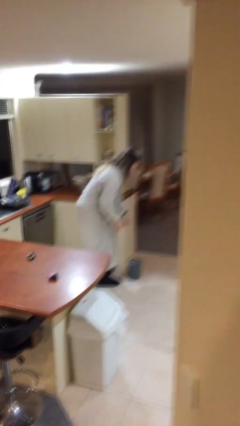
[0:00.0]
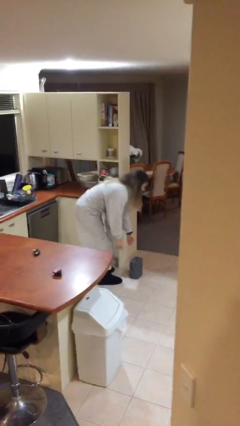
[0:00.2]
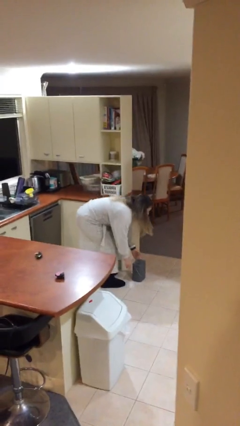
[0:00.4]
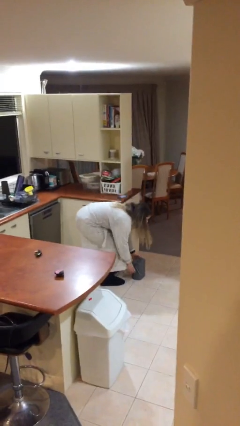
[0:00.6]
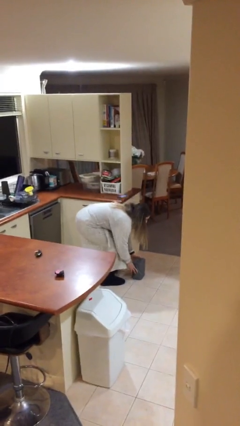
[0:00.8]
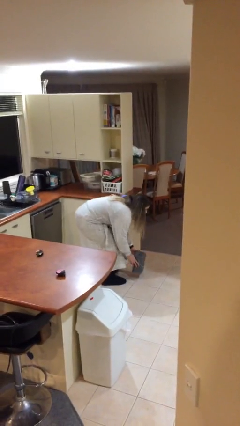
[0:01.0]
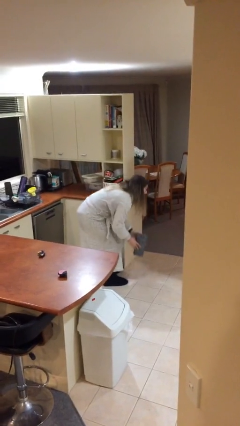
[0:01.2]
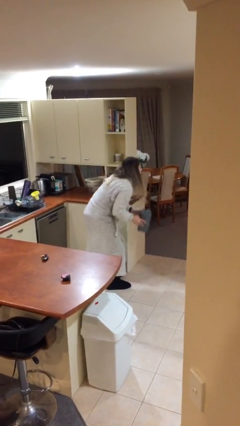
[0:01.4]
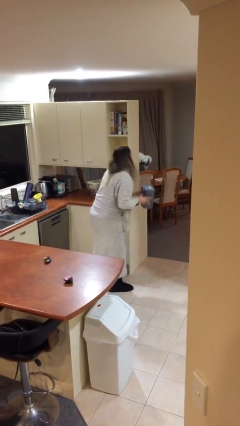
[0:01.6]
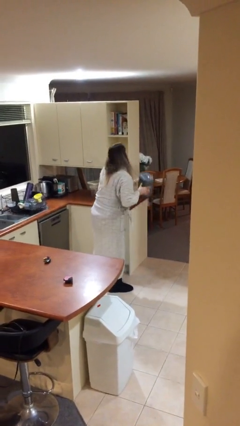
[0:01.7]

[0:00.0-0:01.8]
person picks up object from floor

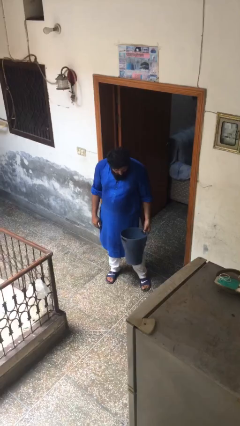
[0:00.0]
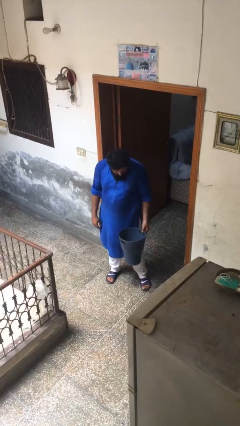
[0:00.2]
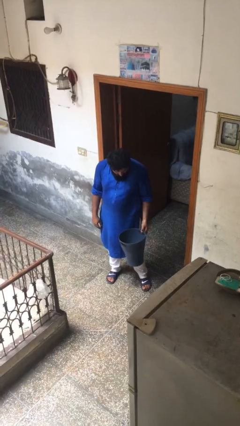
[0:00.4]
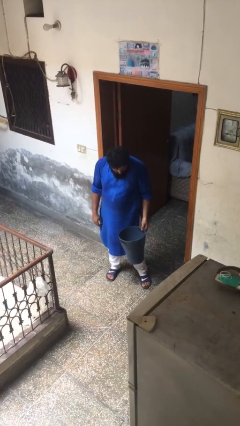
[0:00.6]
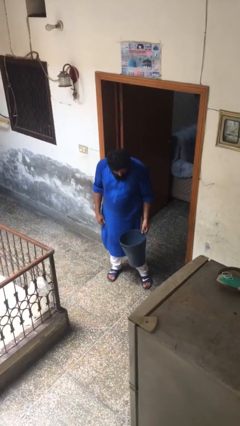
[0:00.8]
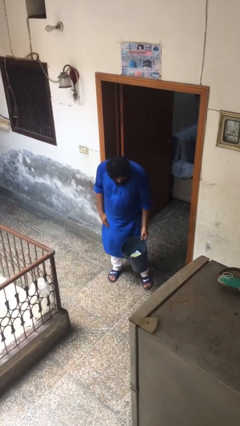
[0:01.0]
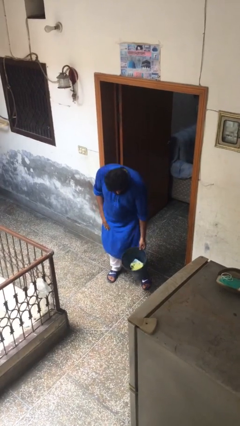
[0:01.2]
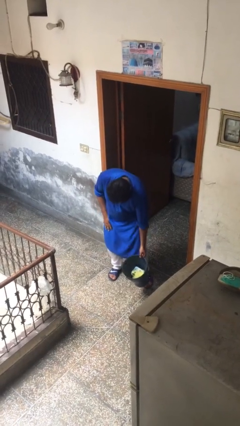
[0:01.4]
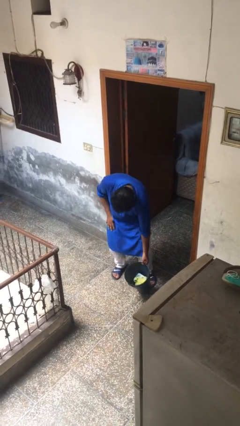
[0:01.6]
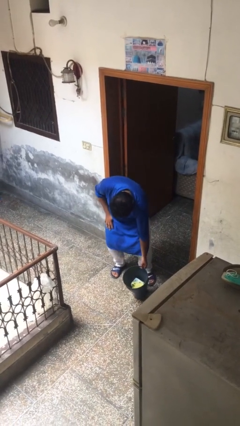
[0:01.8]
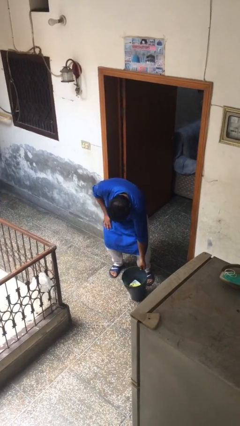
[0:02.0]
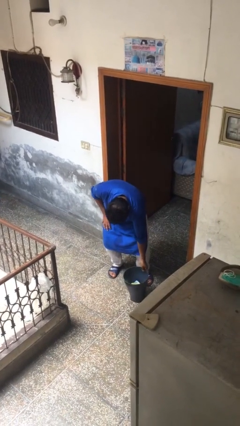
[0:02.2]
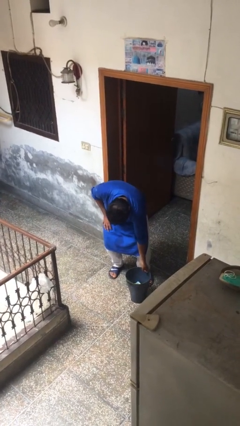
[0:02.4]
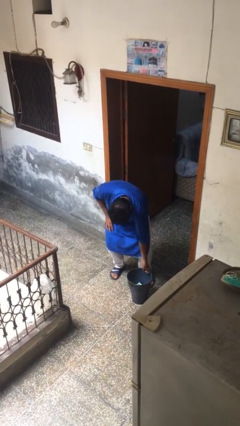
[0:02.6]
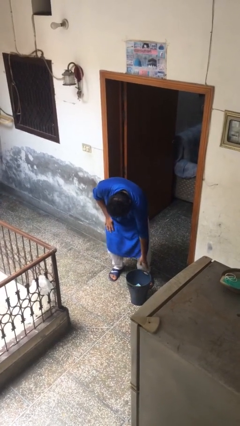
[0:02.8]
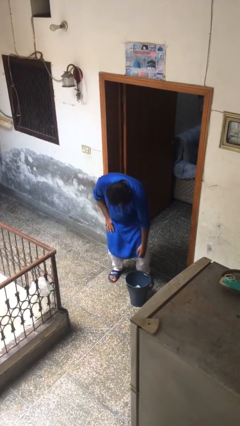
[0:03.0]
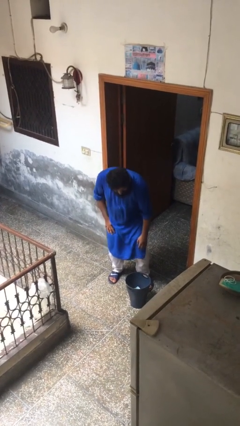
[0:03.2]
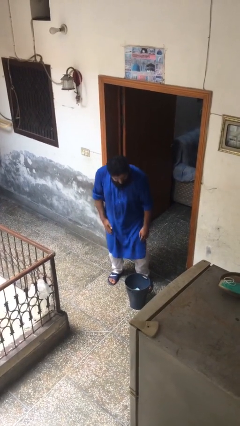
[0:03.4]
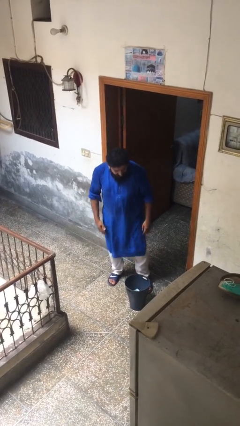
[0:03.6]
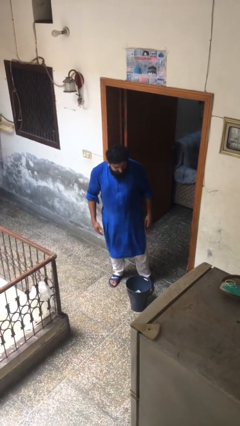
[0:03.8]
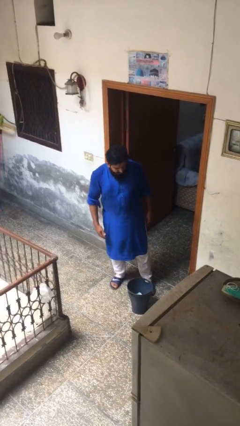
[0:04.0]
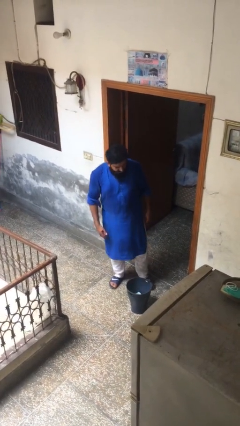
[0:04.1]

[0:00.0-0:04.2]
person puts down object on floor

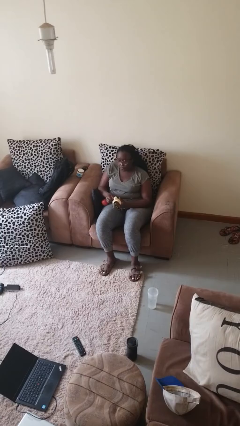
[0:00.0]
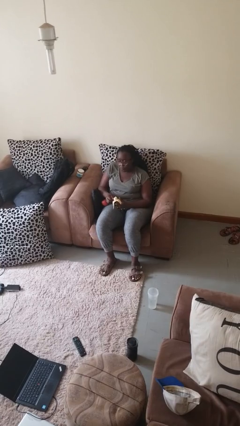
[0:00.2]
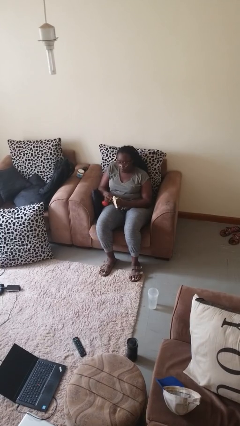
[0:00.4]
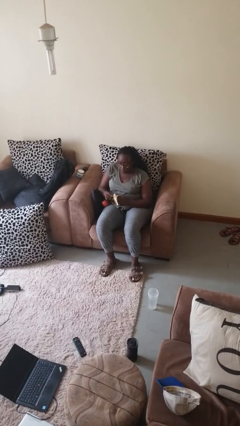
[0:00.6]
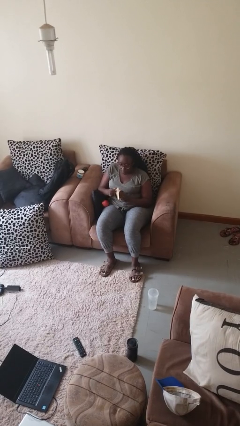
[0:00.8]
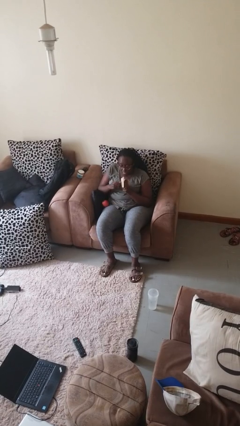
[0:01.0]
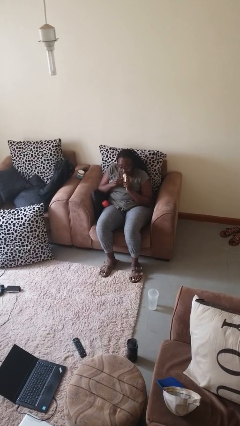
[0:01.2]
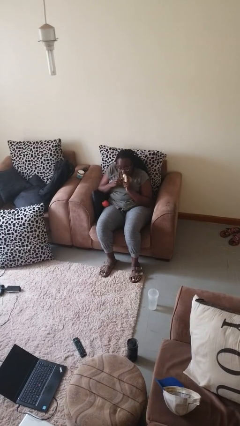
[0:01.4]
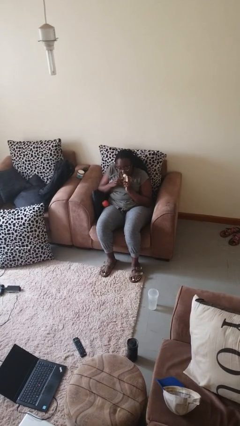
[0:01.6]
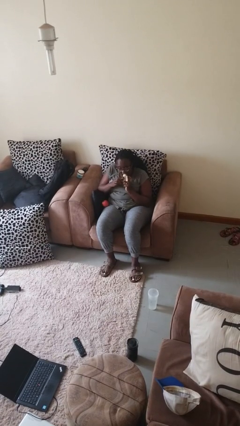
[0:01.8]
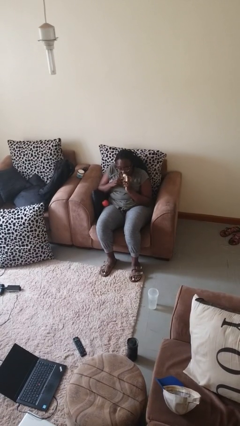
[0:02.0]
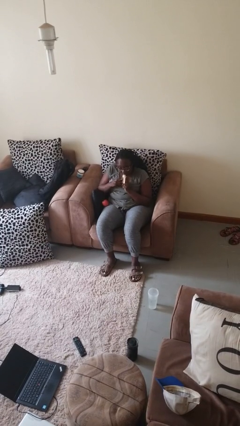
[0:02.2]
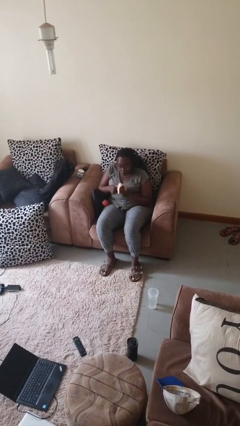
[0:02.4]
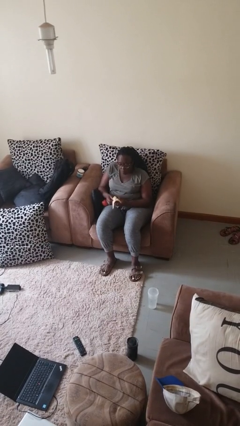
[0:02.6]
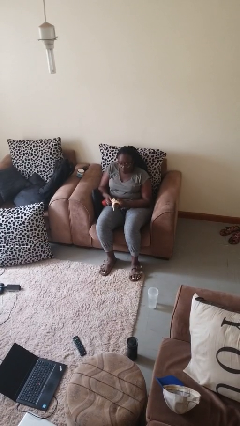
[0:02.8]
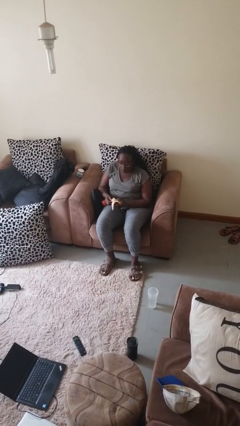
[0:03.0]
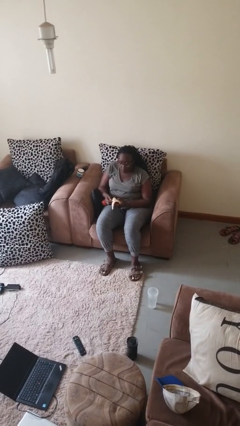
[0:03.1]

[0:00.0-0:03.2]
person eats banana

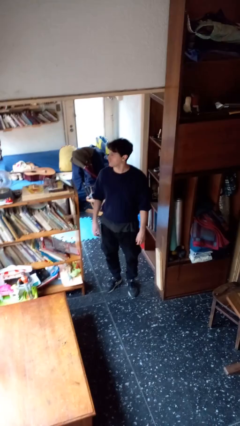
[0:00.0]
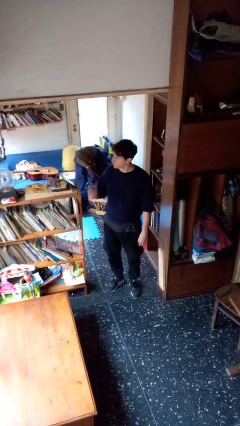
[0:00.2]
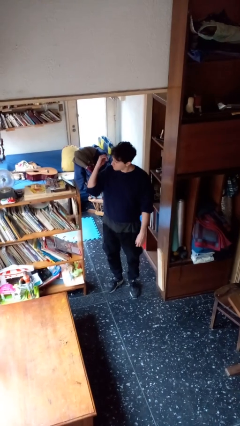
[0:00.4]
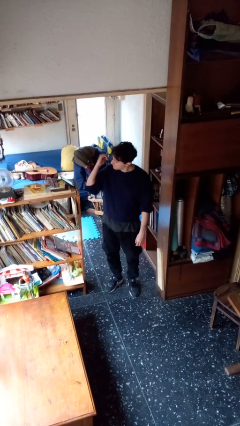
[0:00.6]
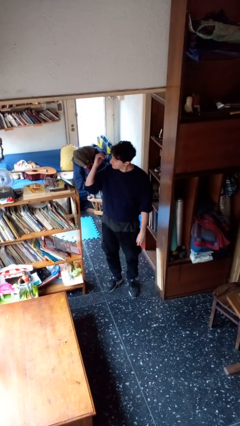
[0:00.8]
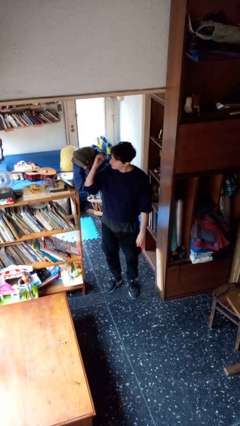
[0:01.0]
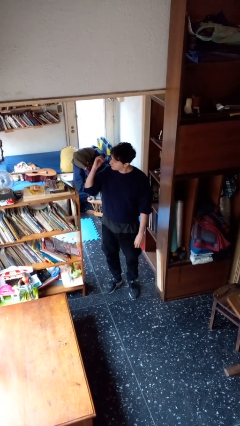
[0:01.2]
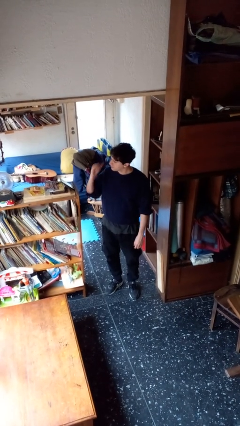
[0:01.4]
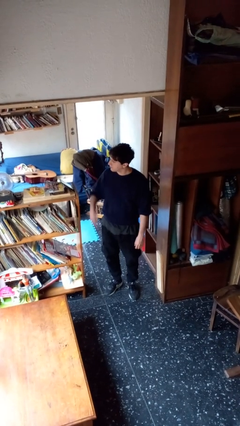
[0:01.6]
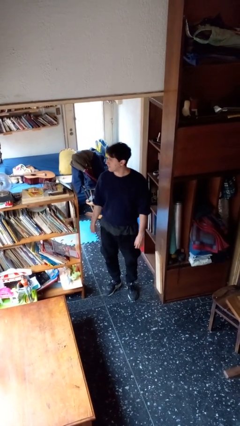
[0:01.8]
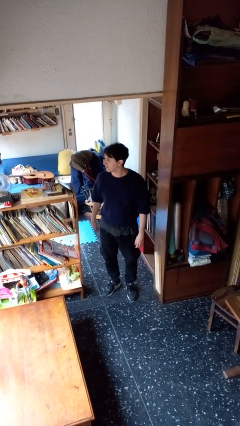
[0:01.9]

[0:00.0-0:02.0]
person gestures behind me

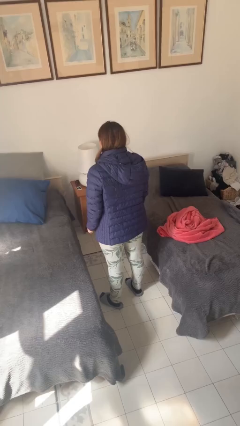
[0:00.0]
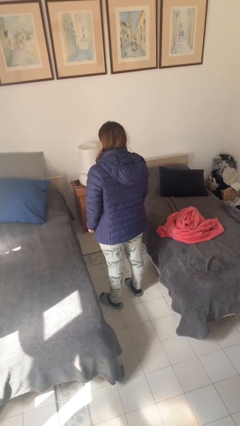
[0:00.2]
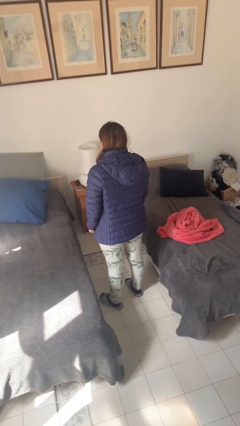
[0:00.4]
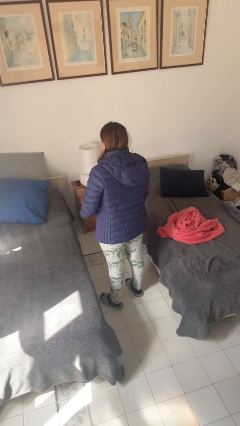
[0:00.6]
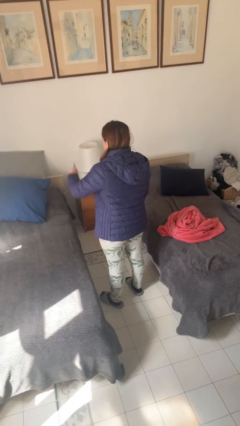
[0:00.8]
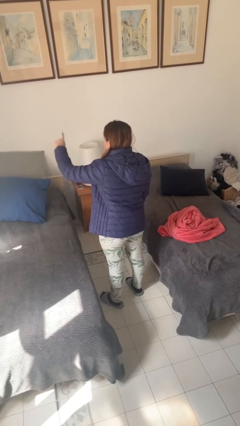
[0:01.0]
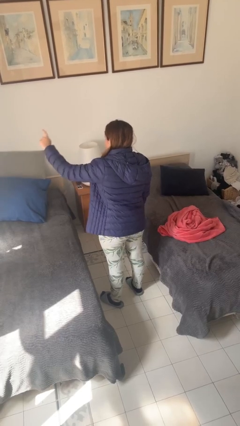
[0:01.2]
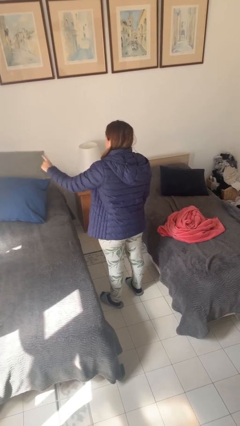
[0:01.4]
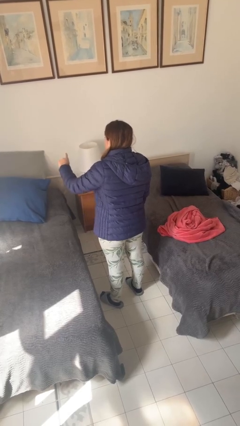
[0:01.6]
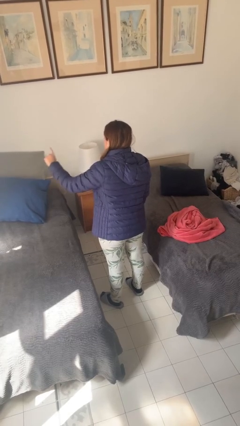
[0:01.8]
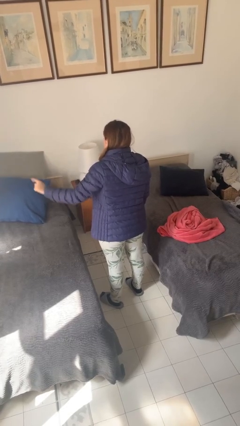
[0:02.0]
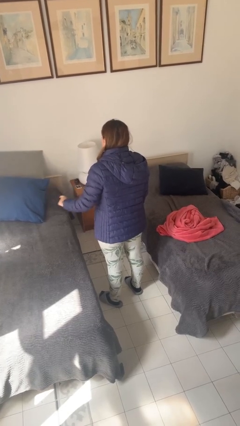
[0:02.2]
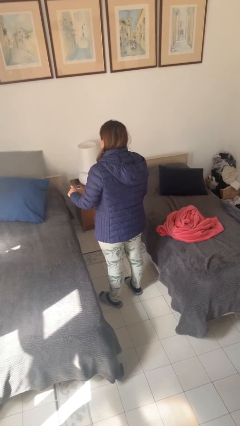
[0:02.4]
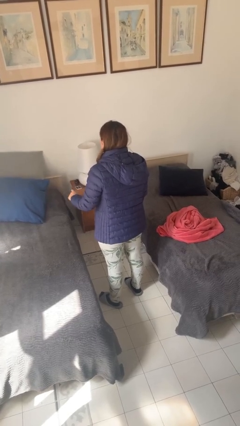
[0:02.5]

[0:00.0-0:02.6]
person gestures number three

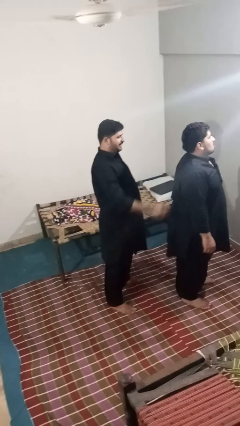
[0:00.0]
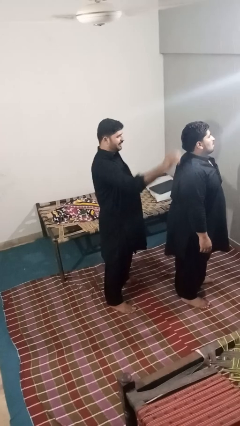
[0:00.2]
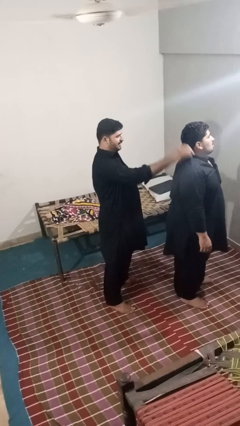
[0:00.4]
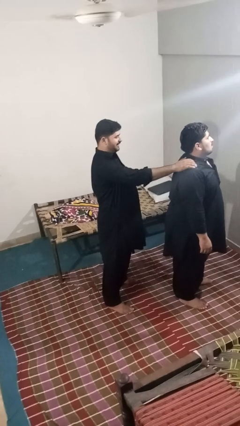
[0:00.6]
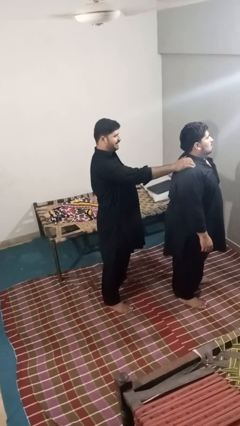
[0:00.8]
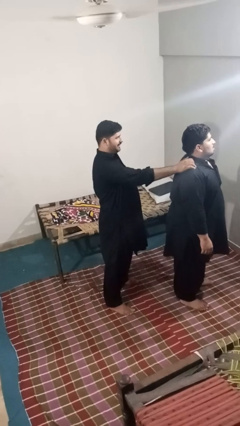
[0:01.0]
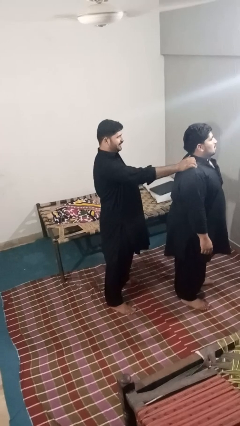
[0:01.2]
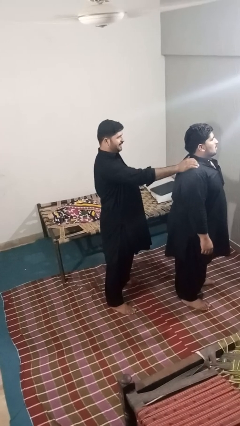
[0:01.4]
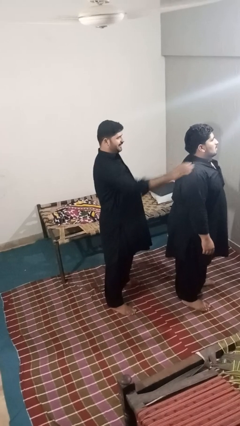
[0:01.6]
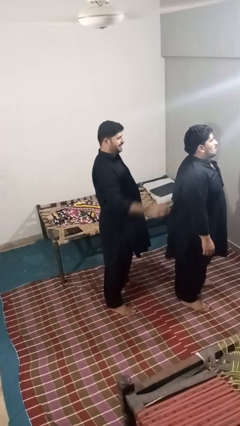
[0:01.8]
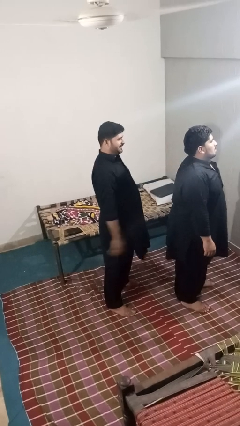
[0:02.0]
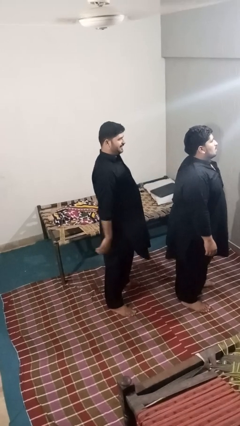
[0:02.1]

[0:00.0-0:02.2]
person touches back of person

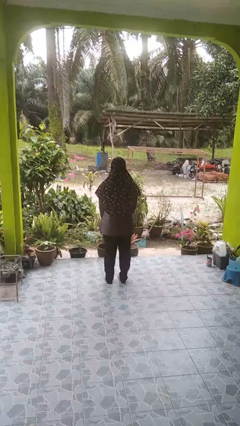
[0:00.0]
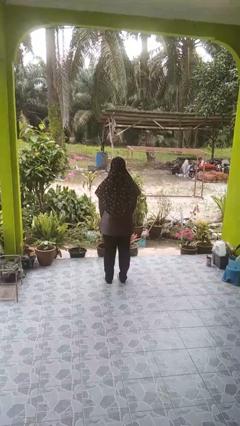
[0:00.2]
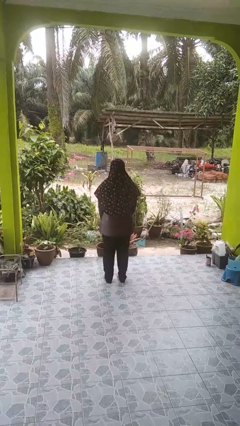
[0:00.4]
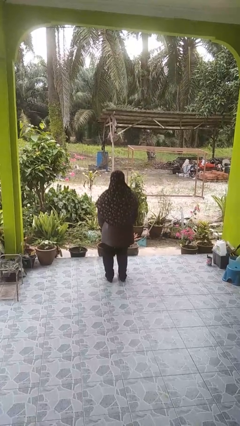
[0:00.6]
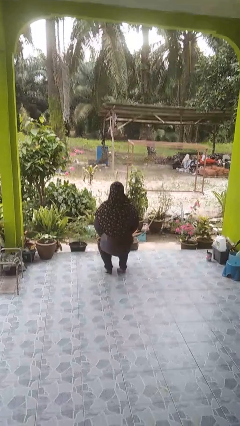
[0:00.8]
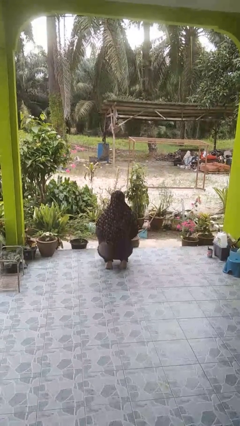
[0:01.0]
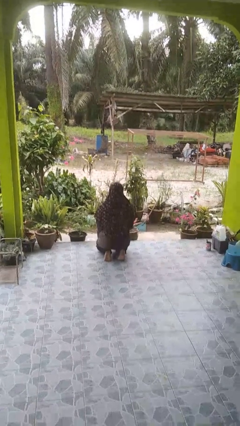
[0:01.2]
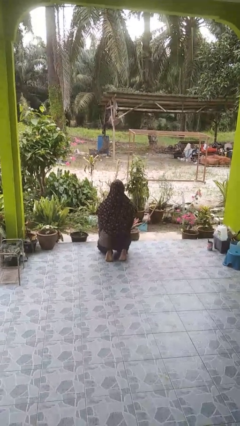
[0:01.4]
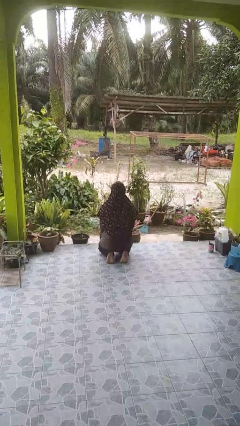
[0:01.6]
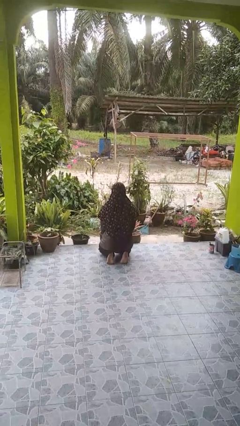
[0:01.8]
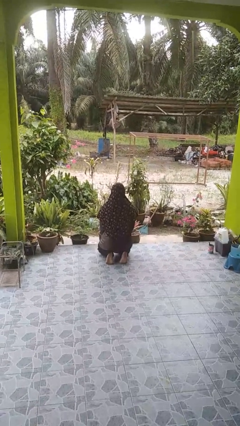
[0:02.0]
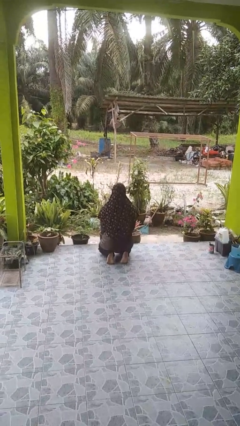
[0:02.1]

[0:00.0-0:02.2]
person kneels
